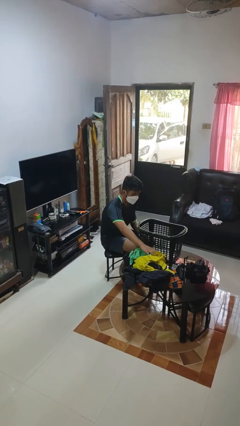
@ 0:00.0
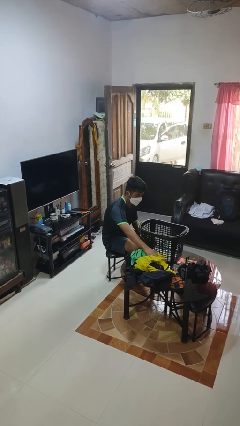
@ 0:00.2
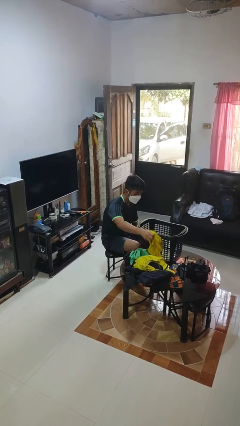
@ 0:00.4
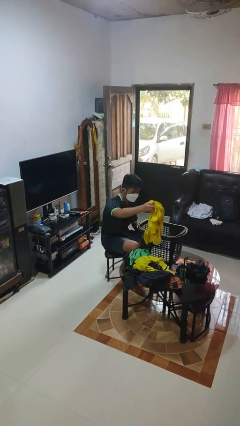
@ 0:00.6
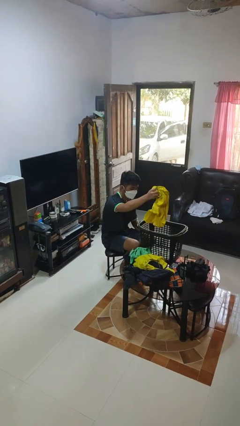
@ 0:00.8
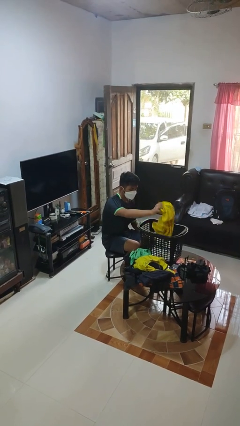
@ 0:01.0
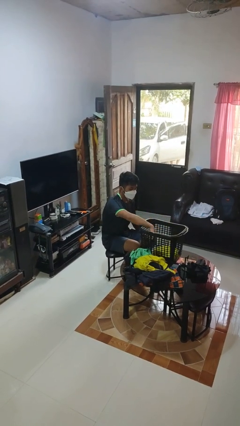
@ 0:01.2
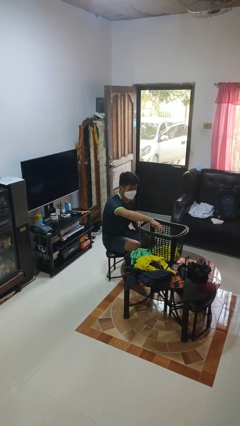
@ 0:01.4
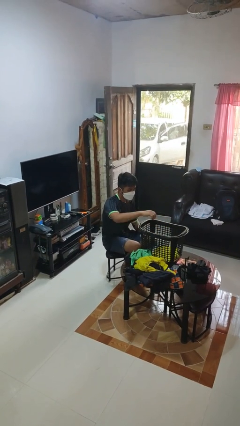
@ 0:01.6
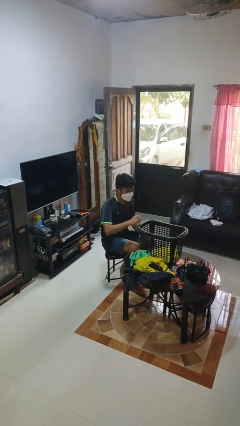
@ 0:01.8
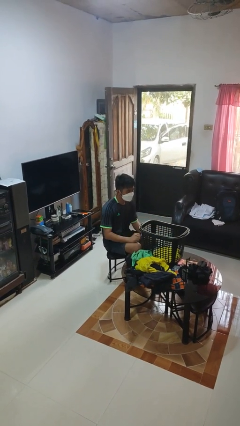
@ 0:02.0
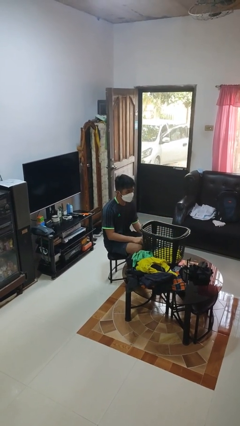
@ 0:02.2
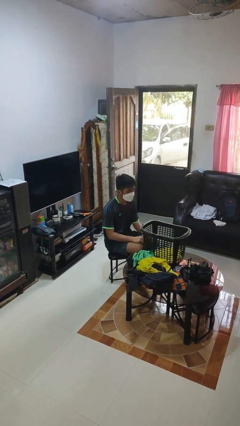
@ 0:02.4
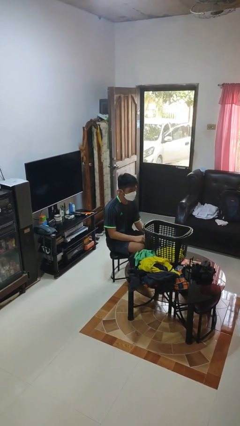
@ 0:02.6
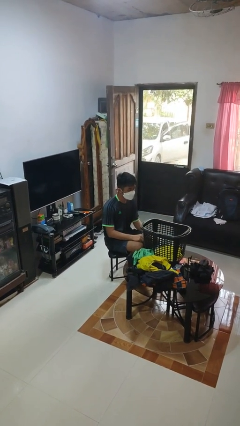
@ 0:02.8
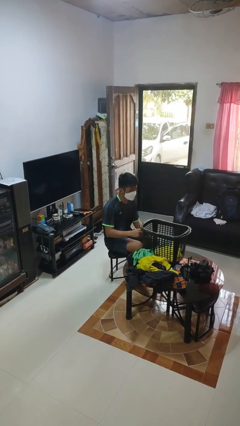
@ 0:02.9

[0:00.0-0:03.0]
person puts object into basket

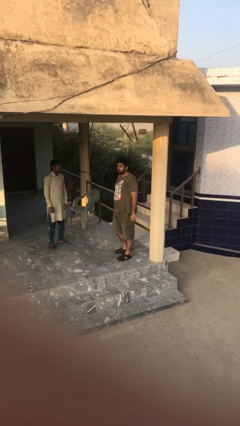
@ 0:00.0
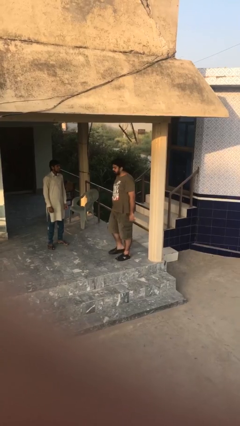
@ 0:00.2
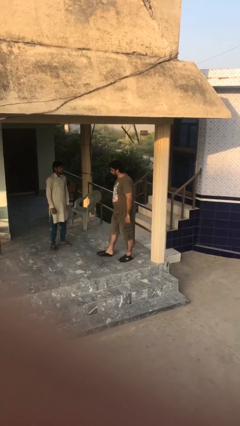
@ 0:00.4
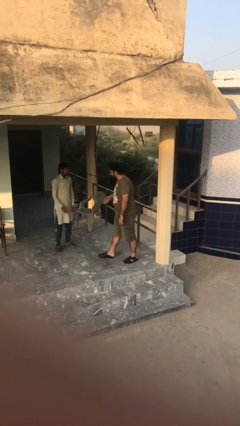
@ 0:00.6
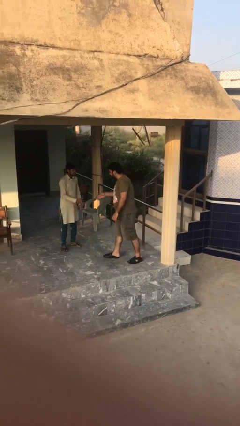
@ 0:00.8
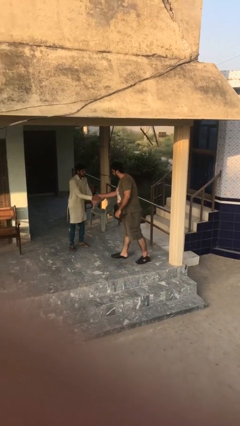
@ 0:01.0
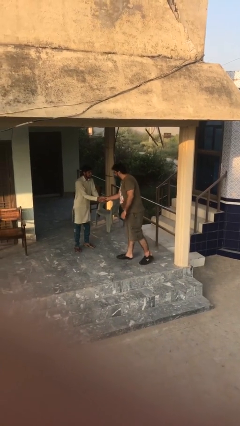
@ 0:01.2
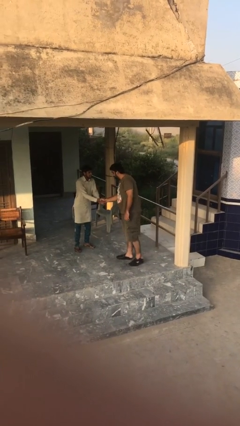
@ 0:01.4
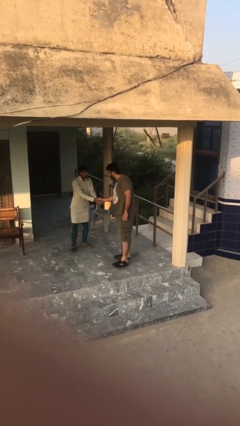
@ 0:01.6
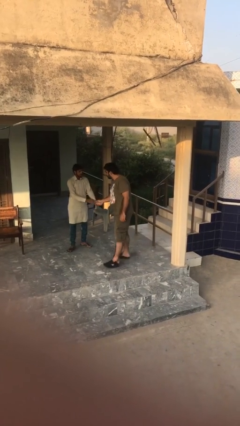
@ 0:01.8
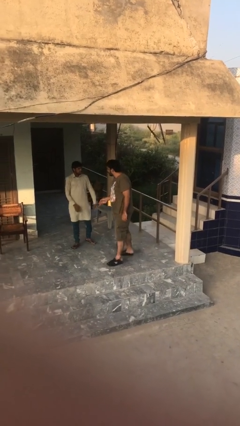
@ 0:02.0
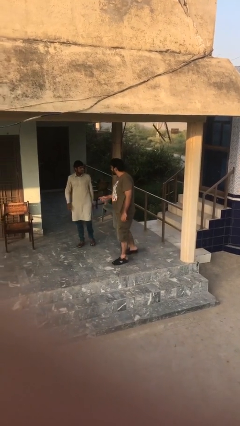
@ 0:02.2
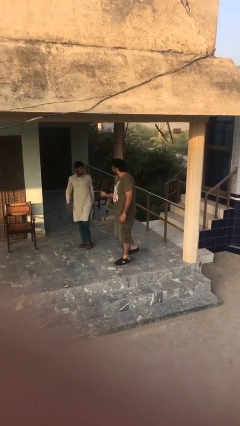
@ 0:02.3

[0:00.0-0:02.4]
person shakes hand

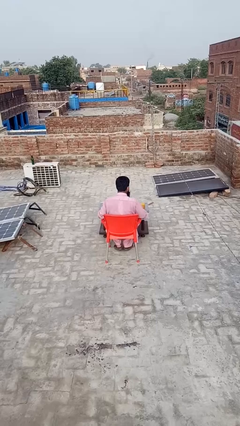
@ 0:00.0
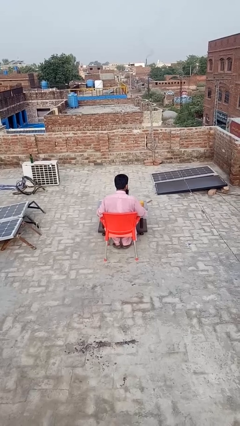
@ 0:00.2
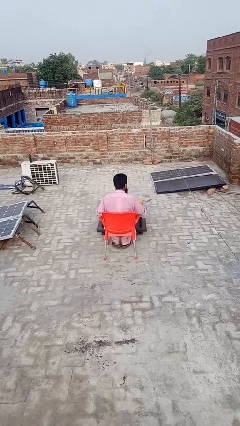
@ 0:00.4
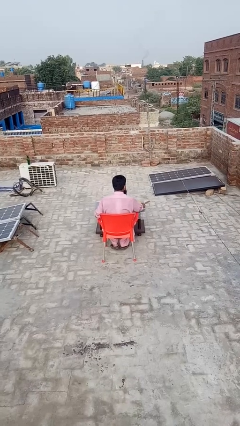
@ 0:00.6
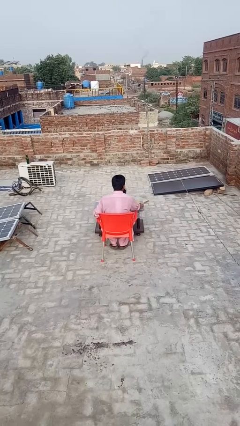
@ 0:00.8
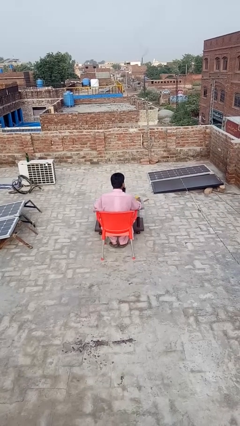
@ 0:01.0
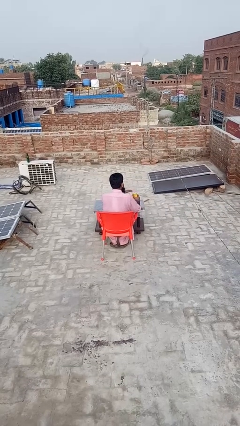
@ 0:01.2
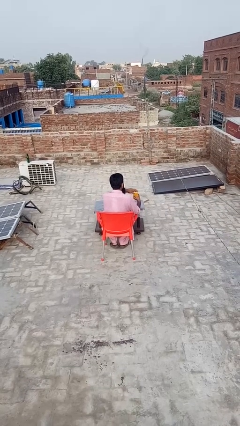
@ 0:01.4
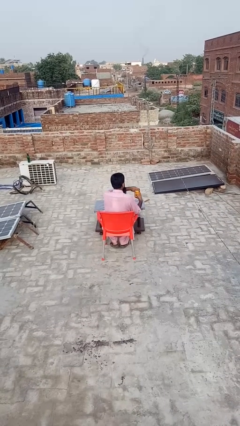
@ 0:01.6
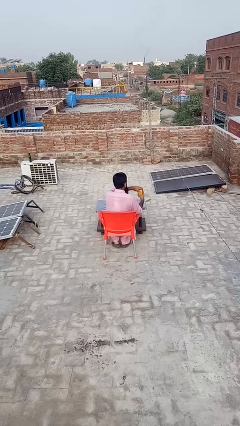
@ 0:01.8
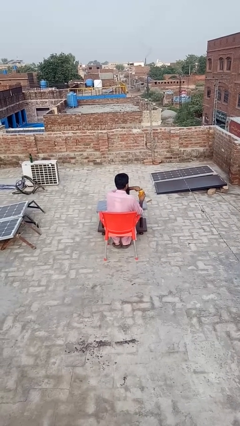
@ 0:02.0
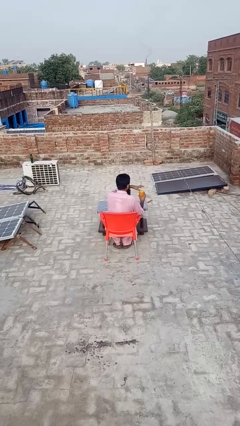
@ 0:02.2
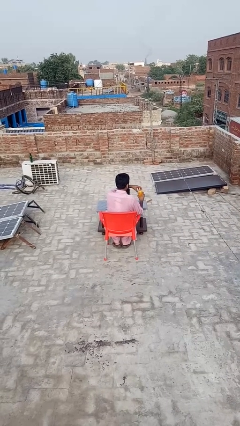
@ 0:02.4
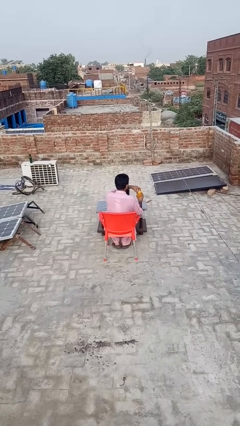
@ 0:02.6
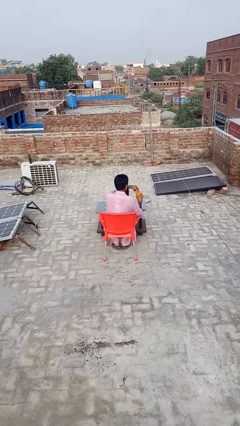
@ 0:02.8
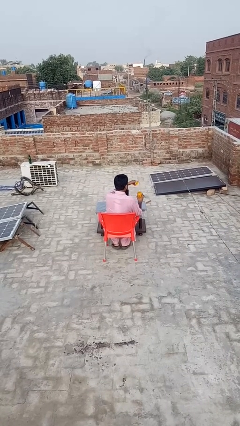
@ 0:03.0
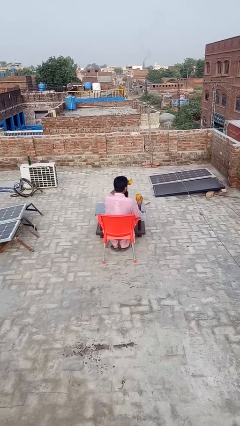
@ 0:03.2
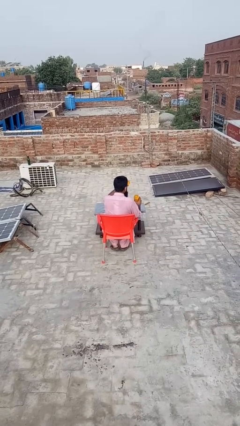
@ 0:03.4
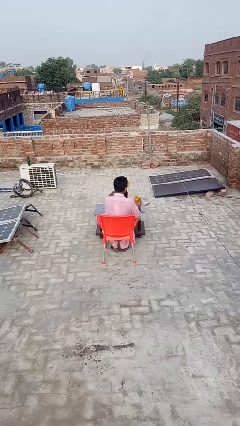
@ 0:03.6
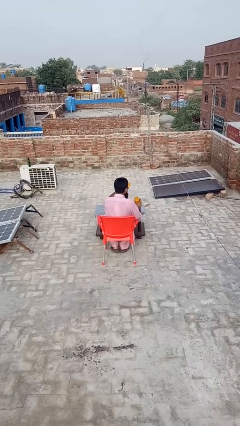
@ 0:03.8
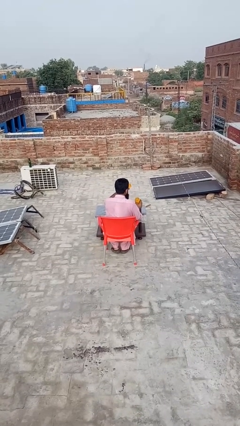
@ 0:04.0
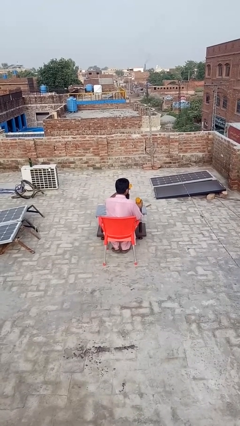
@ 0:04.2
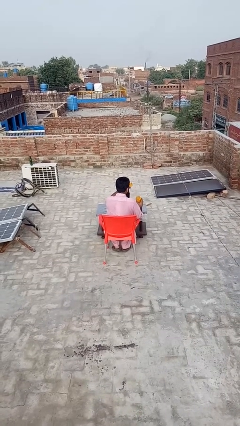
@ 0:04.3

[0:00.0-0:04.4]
person opens jar

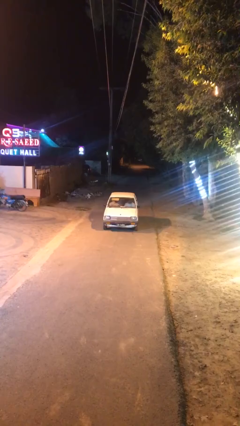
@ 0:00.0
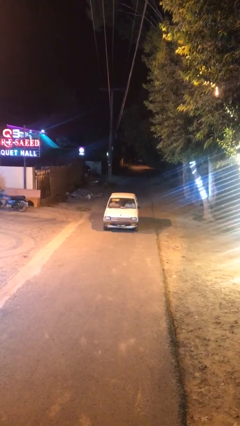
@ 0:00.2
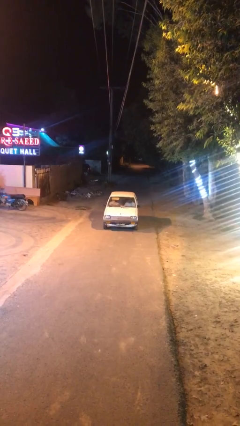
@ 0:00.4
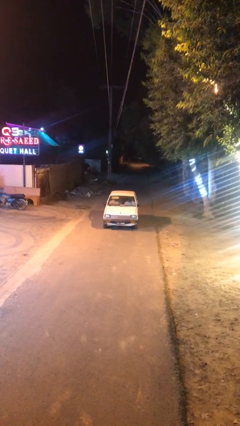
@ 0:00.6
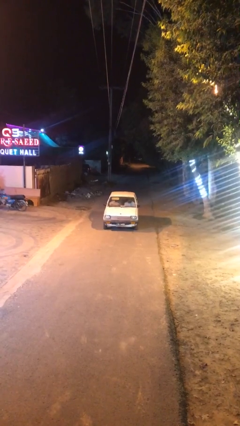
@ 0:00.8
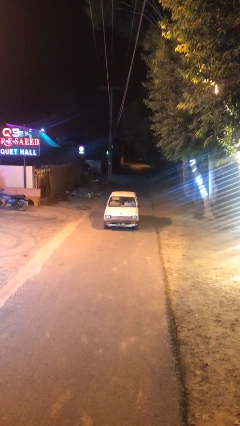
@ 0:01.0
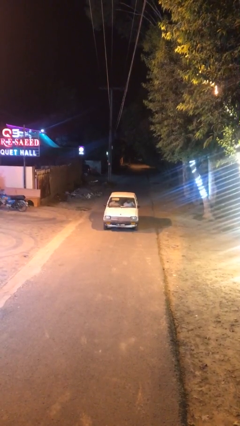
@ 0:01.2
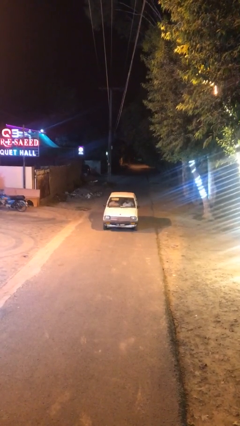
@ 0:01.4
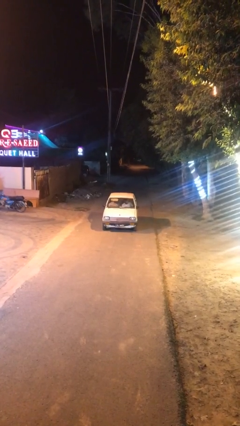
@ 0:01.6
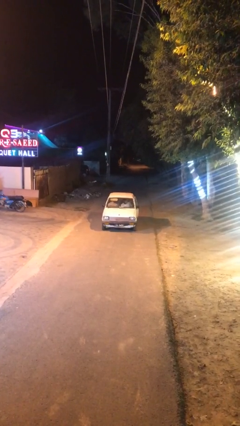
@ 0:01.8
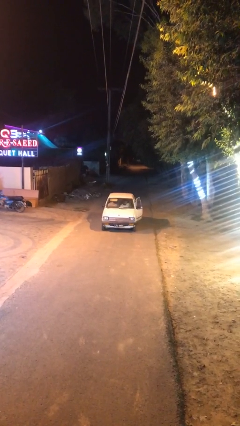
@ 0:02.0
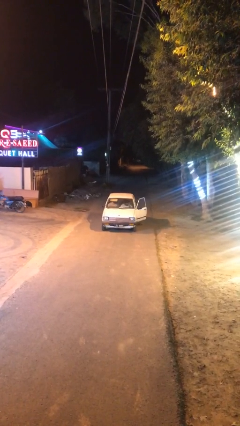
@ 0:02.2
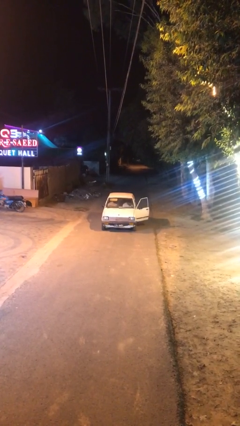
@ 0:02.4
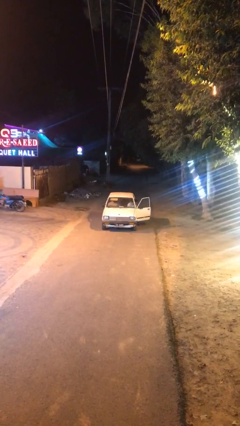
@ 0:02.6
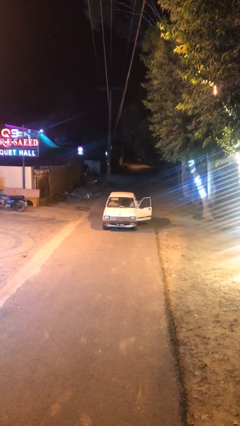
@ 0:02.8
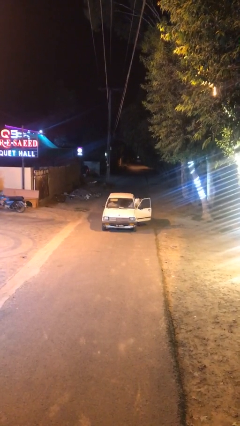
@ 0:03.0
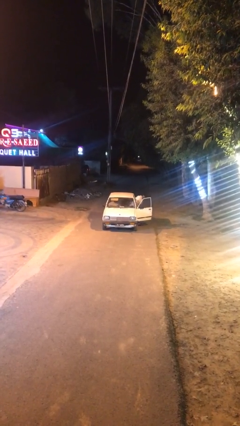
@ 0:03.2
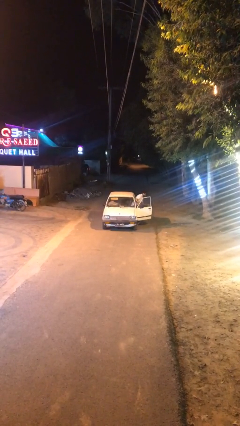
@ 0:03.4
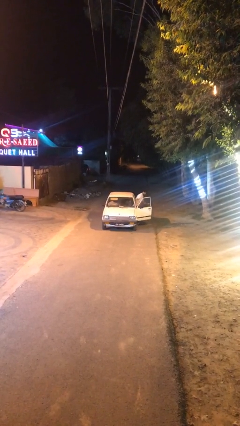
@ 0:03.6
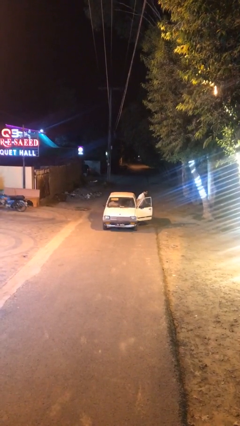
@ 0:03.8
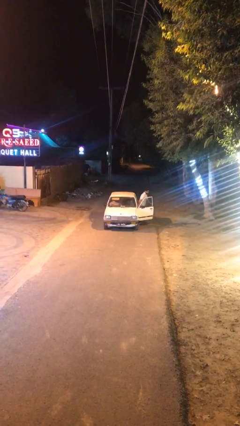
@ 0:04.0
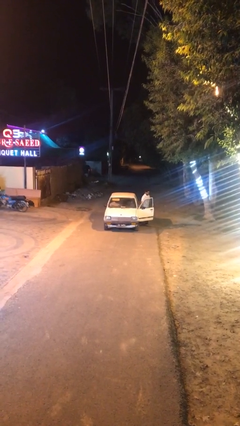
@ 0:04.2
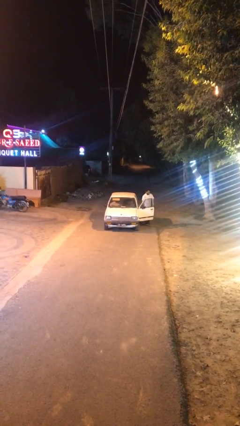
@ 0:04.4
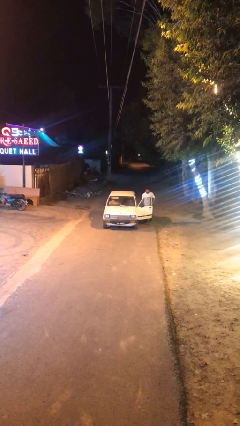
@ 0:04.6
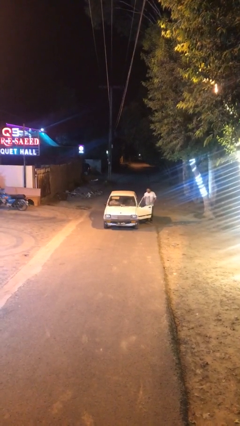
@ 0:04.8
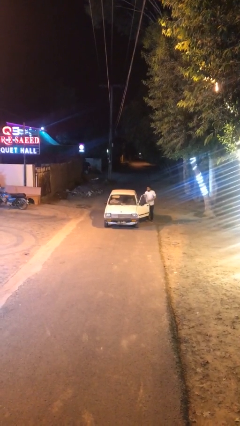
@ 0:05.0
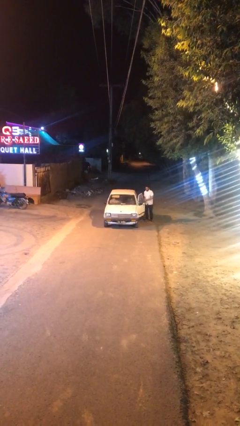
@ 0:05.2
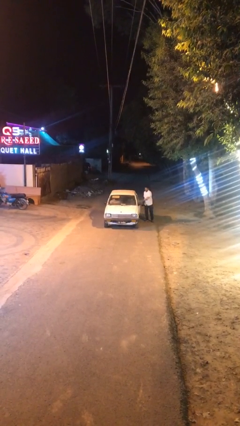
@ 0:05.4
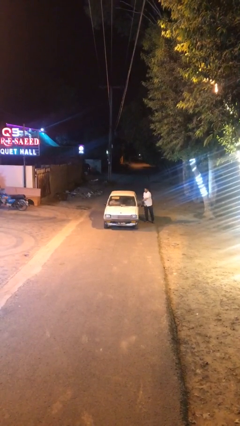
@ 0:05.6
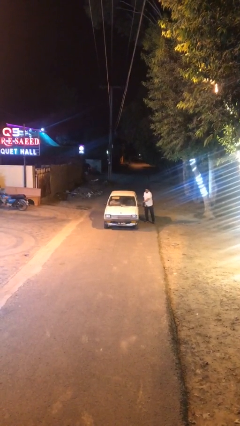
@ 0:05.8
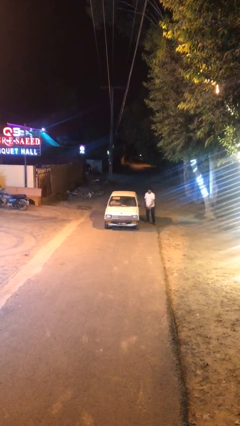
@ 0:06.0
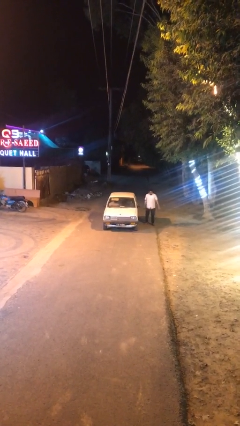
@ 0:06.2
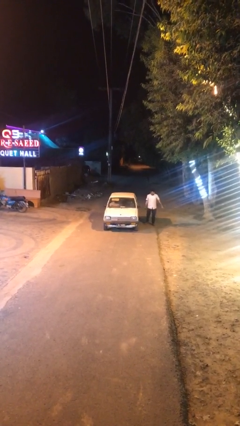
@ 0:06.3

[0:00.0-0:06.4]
car drops off person

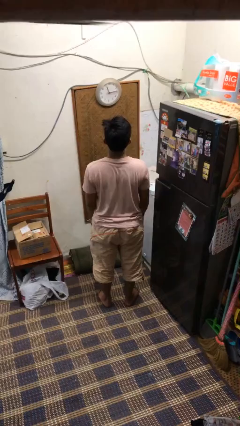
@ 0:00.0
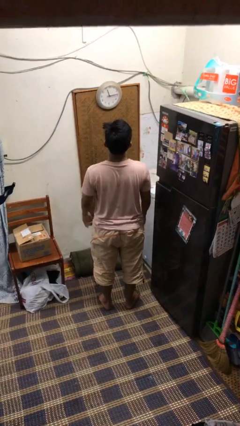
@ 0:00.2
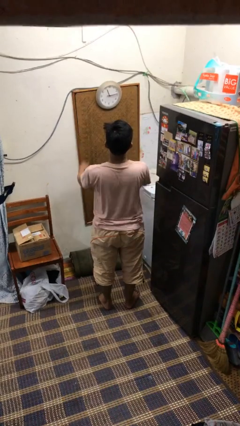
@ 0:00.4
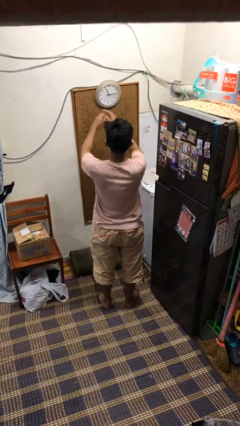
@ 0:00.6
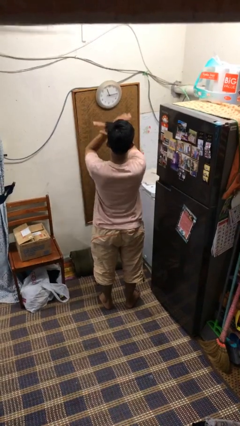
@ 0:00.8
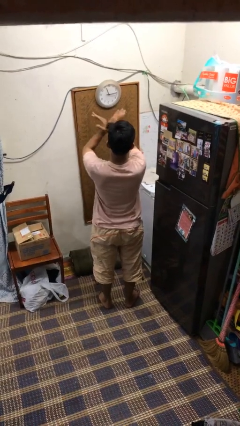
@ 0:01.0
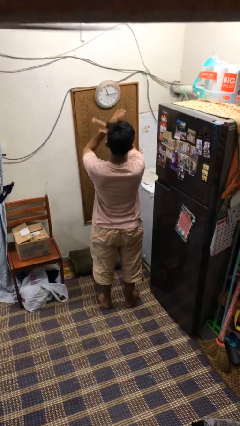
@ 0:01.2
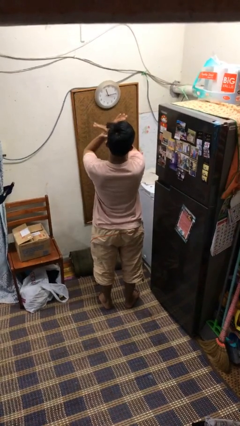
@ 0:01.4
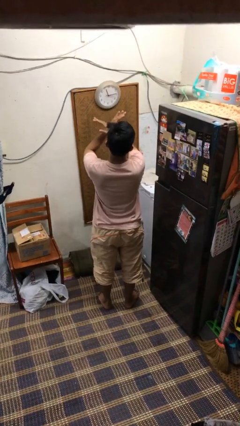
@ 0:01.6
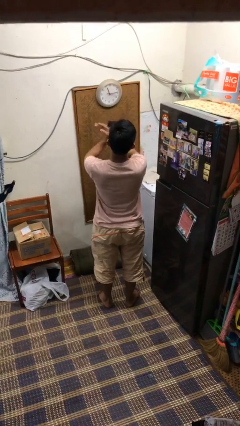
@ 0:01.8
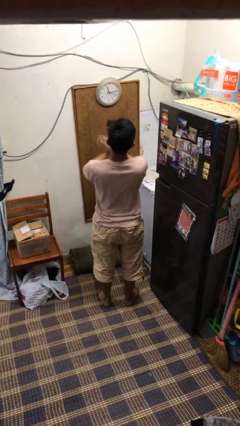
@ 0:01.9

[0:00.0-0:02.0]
person gestures arms x
